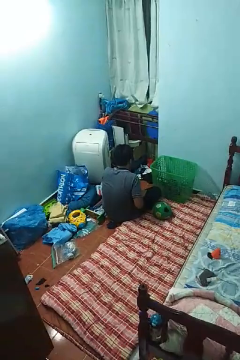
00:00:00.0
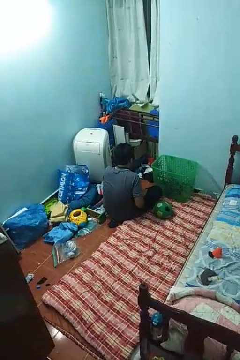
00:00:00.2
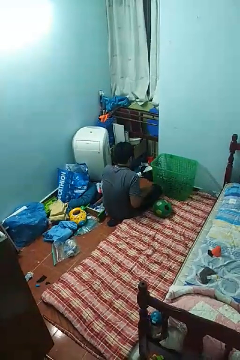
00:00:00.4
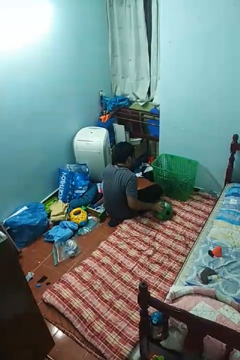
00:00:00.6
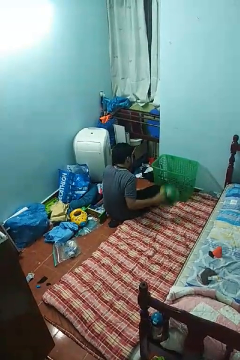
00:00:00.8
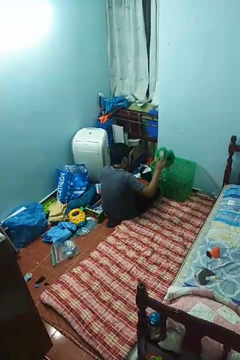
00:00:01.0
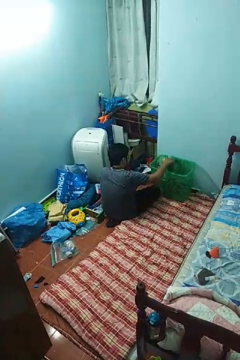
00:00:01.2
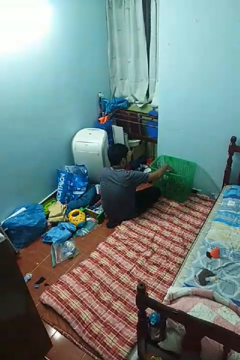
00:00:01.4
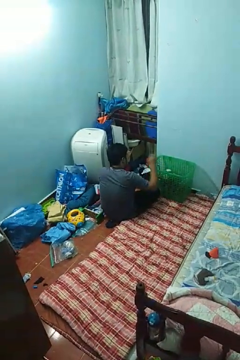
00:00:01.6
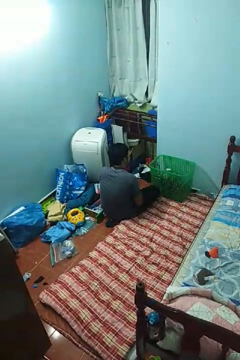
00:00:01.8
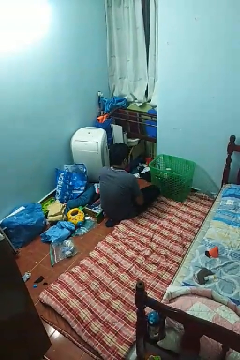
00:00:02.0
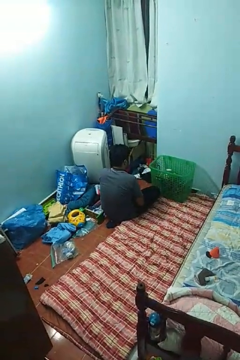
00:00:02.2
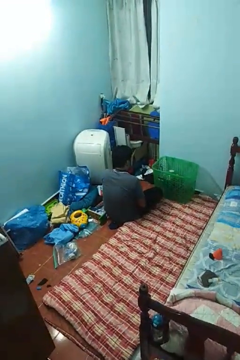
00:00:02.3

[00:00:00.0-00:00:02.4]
person puts object into basket

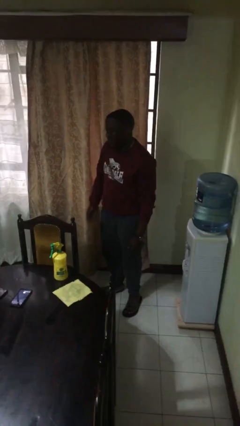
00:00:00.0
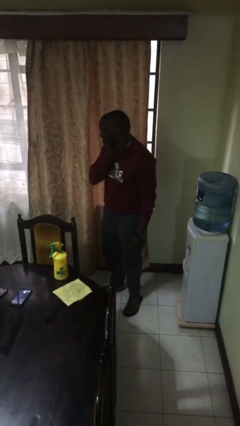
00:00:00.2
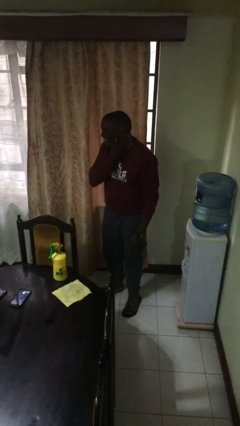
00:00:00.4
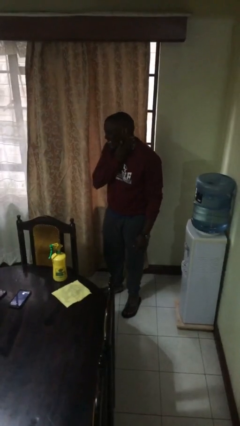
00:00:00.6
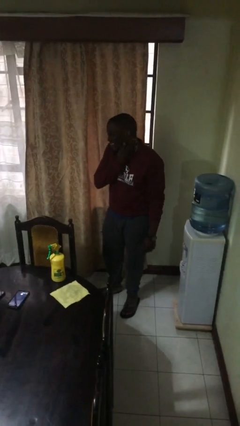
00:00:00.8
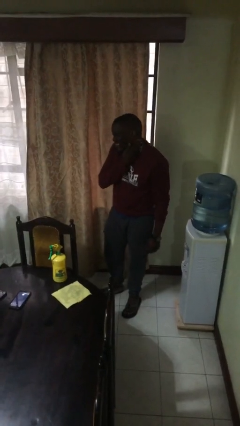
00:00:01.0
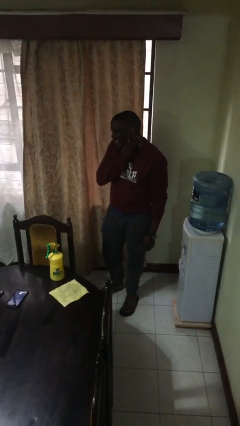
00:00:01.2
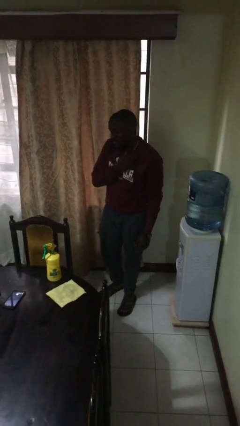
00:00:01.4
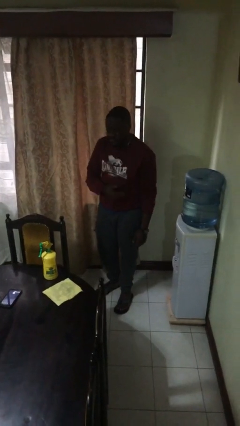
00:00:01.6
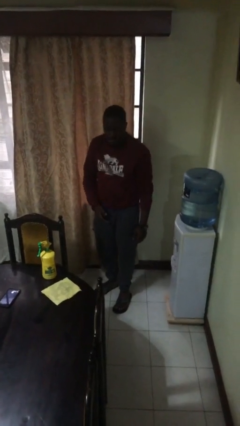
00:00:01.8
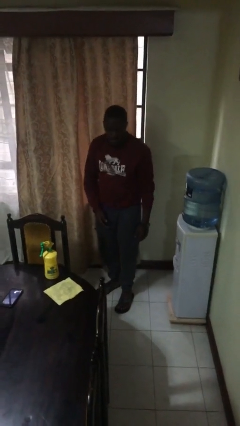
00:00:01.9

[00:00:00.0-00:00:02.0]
person swats bug

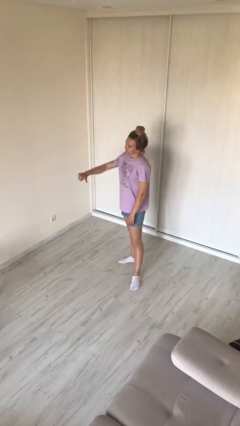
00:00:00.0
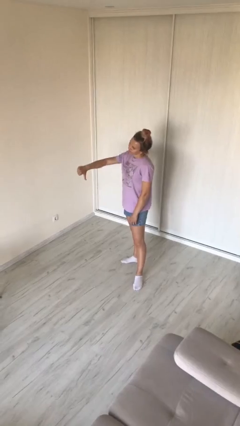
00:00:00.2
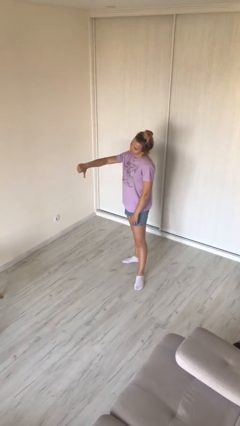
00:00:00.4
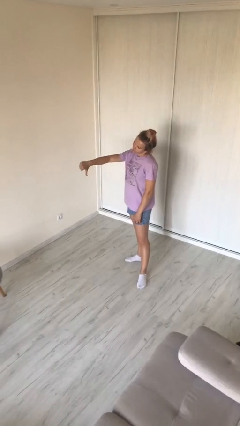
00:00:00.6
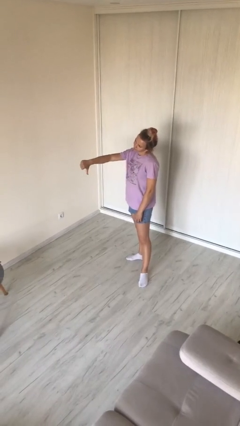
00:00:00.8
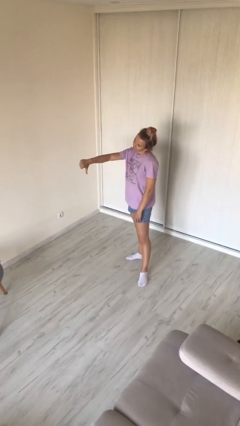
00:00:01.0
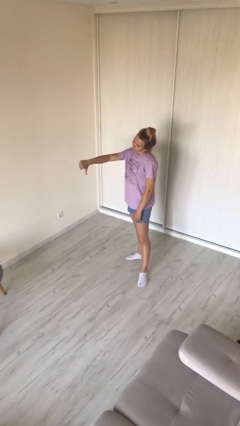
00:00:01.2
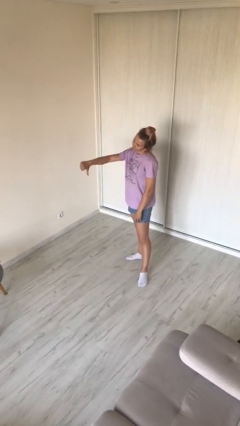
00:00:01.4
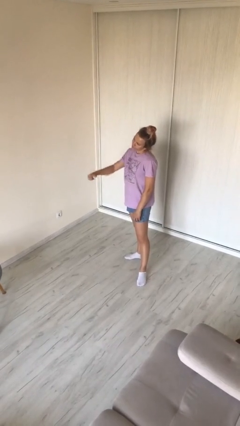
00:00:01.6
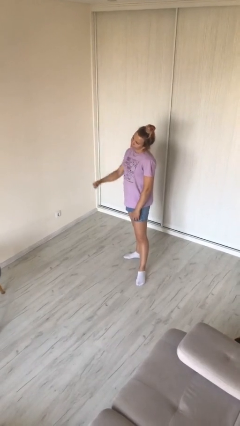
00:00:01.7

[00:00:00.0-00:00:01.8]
person gestures thumbs down

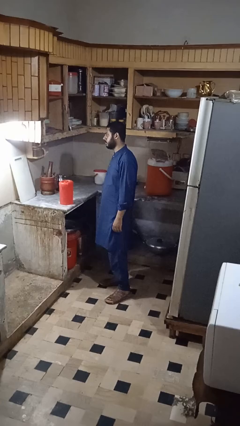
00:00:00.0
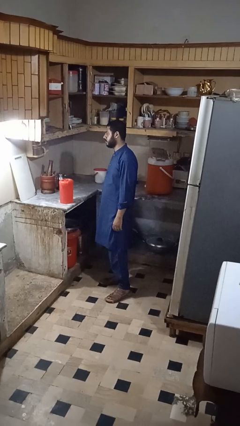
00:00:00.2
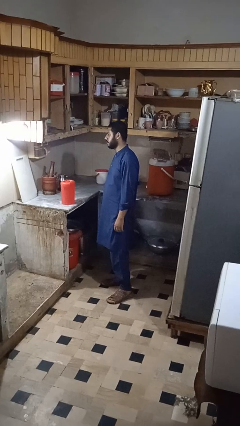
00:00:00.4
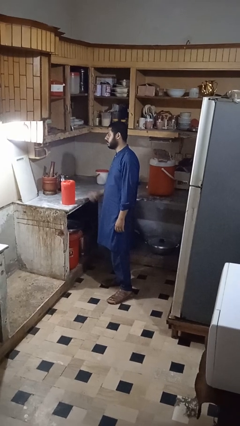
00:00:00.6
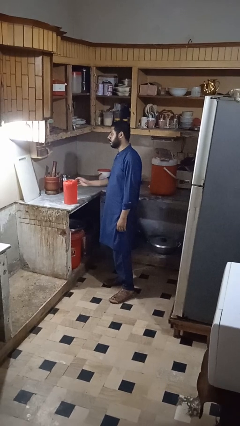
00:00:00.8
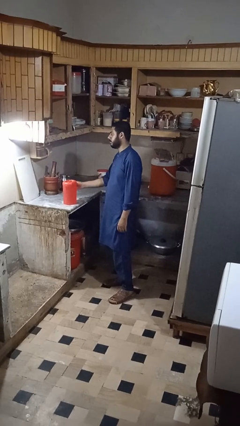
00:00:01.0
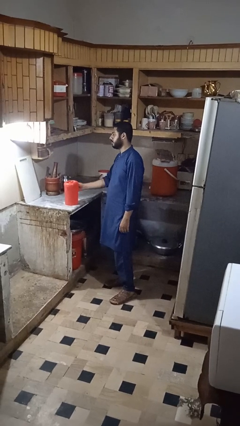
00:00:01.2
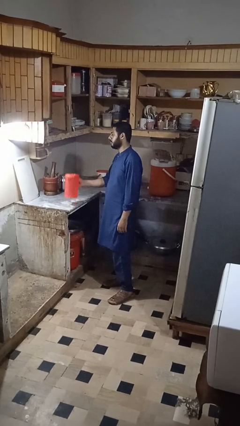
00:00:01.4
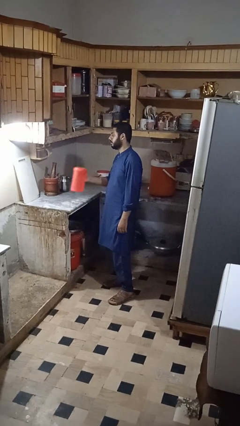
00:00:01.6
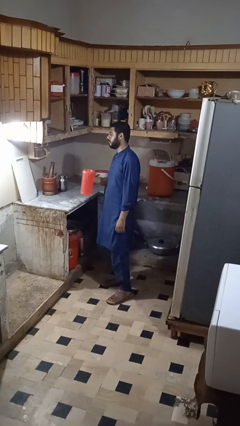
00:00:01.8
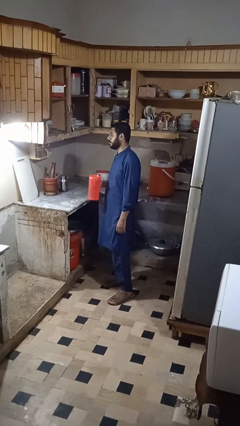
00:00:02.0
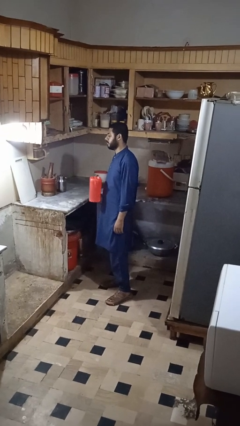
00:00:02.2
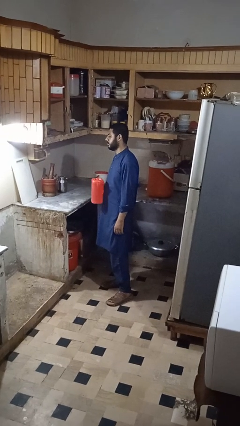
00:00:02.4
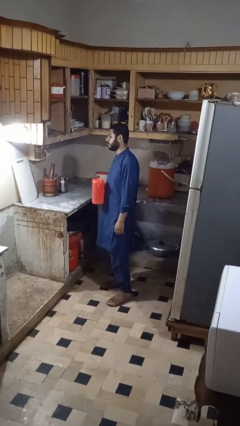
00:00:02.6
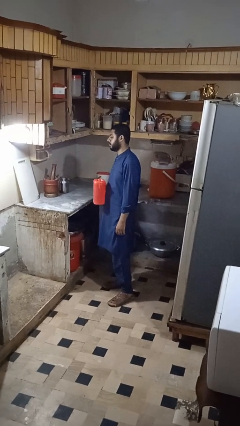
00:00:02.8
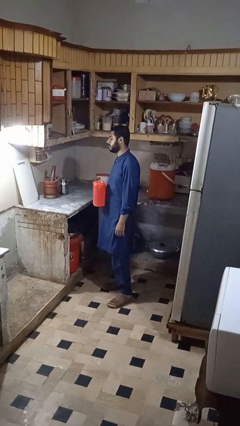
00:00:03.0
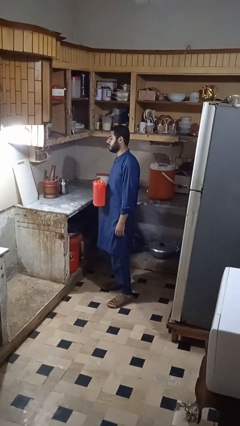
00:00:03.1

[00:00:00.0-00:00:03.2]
person picks up object from countertop

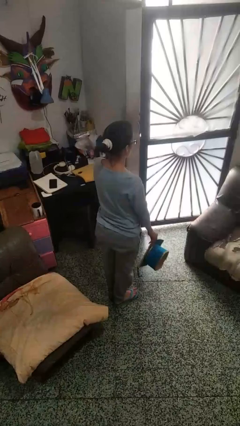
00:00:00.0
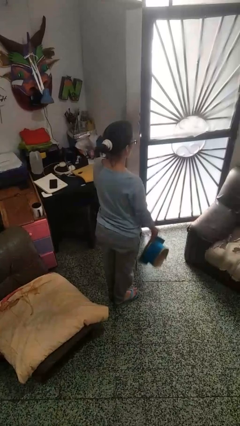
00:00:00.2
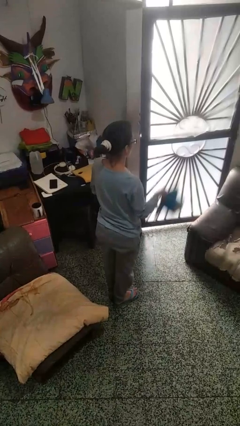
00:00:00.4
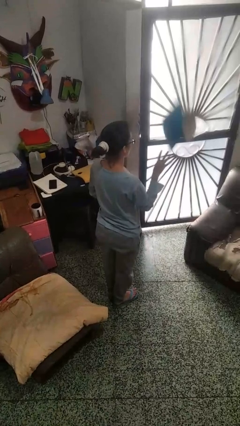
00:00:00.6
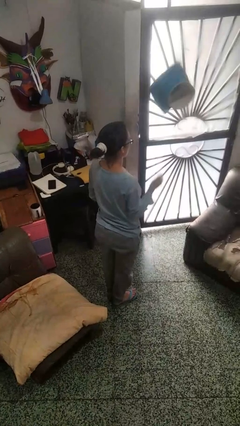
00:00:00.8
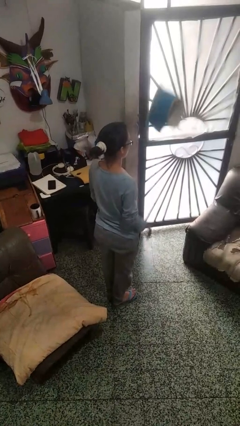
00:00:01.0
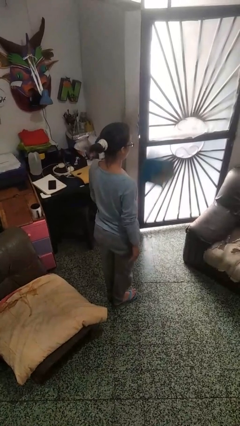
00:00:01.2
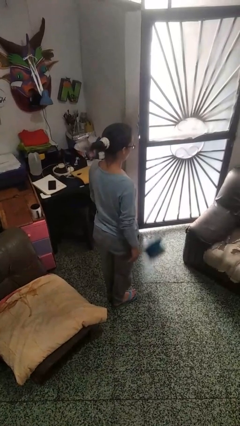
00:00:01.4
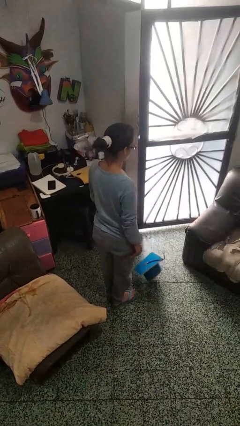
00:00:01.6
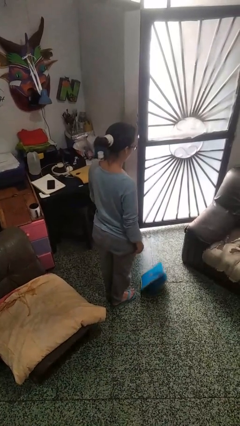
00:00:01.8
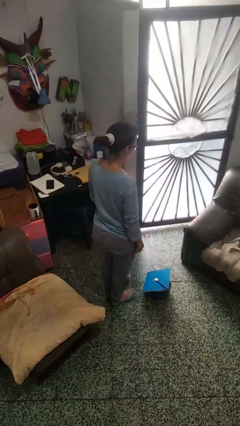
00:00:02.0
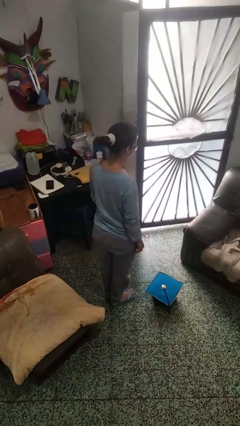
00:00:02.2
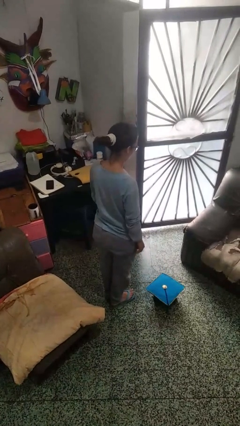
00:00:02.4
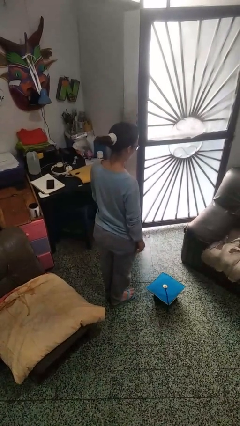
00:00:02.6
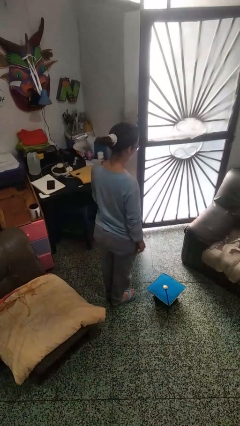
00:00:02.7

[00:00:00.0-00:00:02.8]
person throws object into air

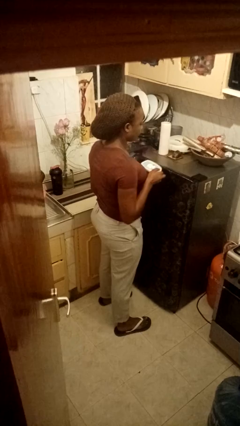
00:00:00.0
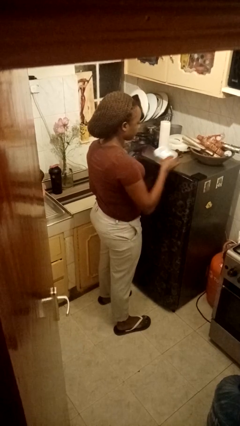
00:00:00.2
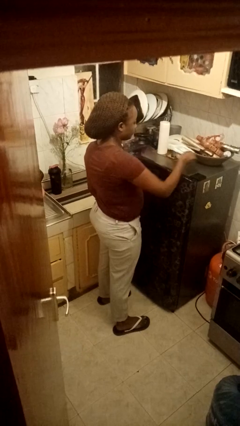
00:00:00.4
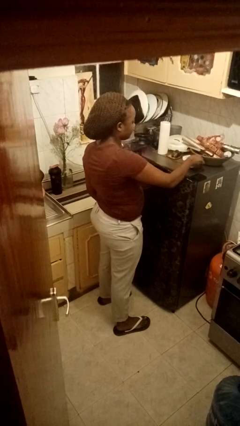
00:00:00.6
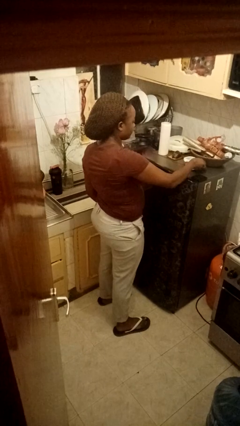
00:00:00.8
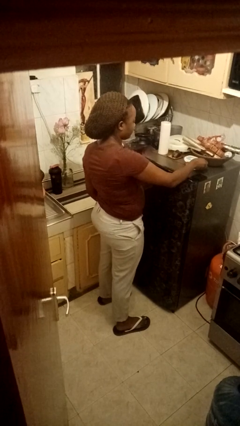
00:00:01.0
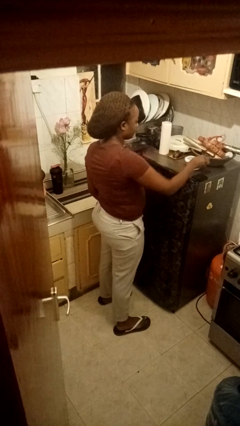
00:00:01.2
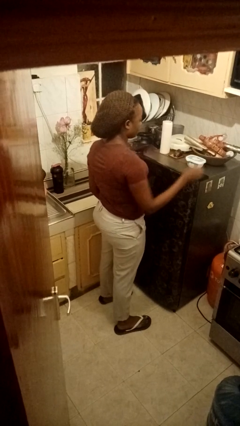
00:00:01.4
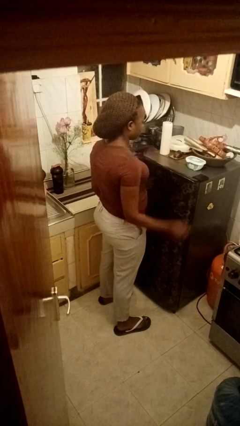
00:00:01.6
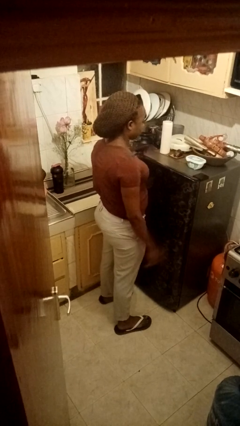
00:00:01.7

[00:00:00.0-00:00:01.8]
person puts down object on countertop

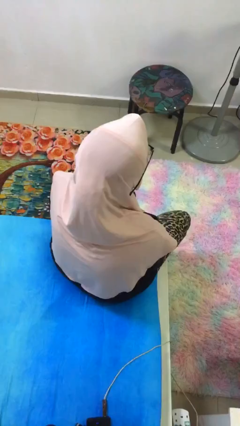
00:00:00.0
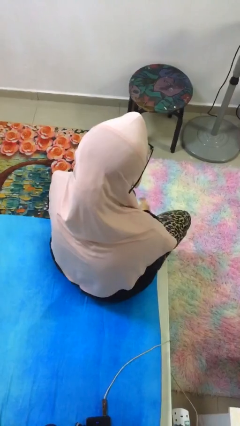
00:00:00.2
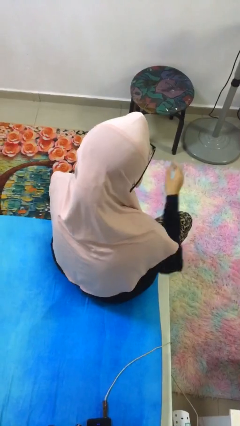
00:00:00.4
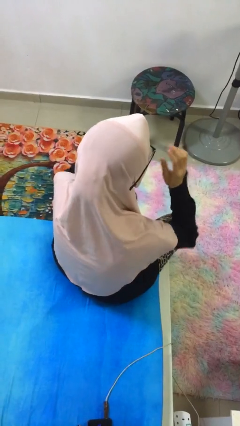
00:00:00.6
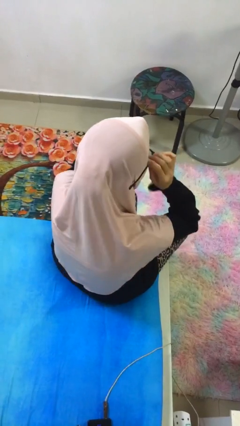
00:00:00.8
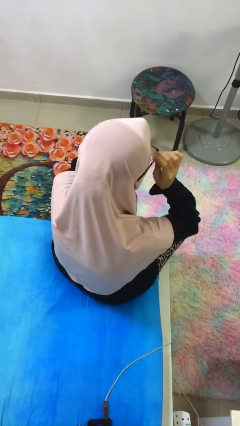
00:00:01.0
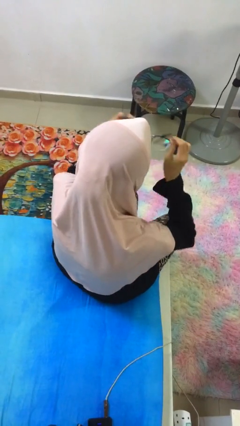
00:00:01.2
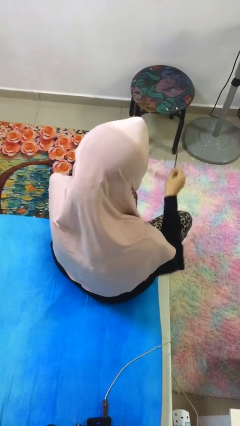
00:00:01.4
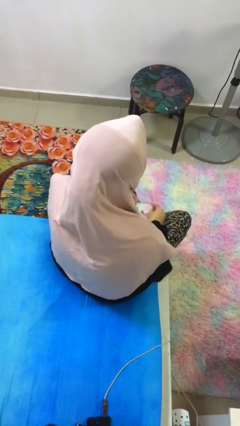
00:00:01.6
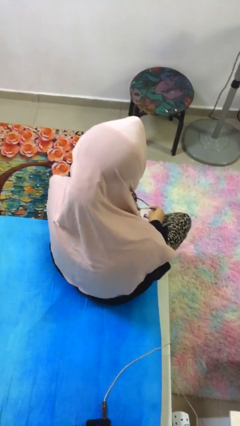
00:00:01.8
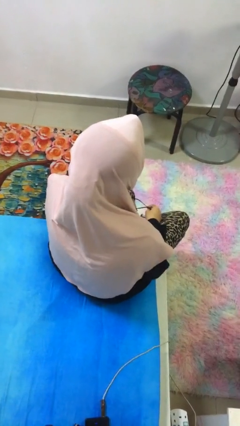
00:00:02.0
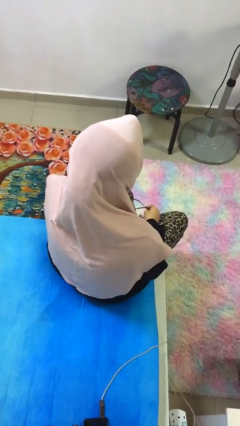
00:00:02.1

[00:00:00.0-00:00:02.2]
person takes off glasses

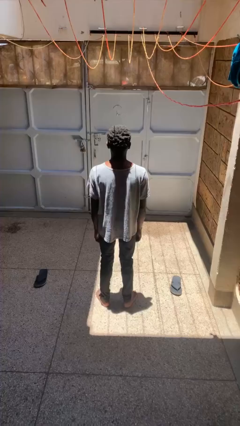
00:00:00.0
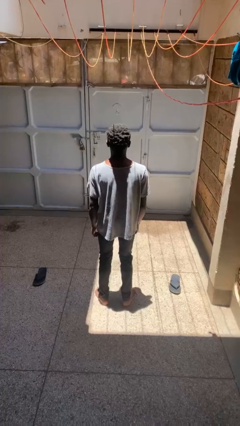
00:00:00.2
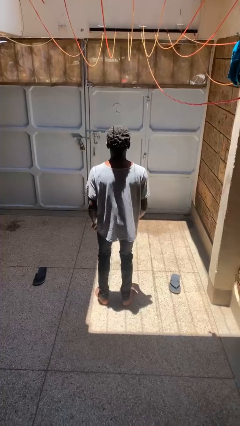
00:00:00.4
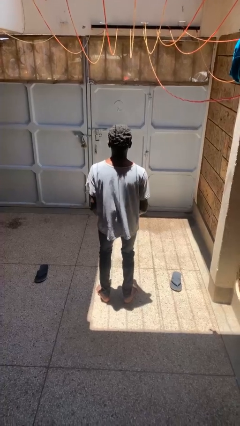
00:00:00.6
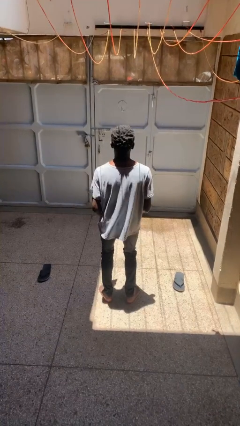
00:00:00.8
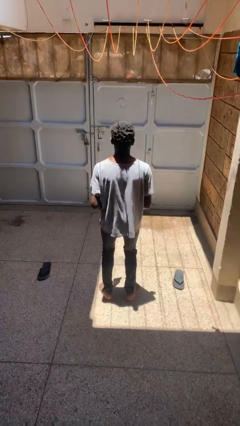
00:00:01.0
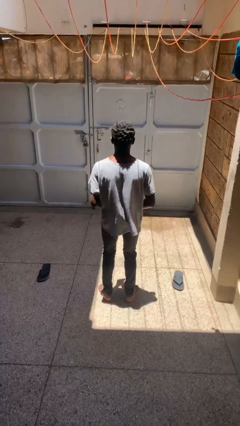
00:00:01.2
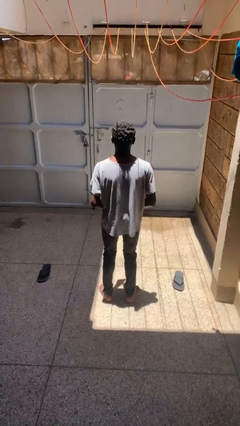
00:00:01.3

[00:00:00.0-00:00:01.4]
person dances in place
